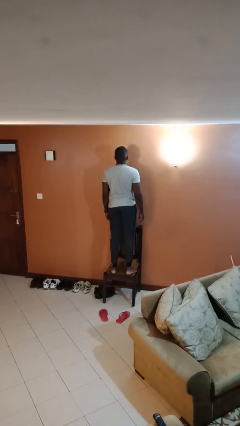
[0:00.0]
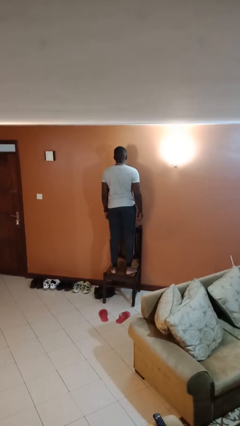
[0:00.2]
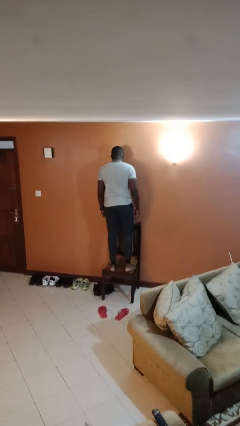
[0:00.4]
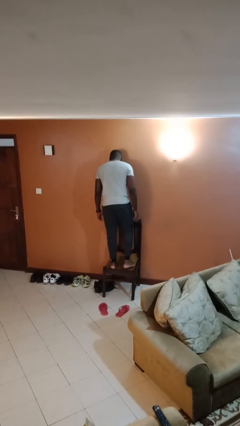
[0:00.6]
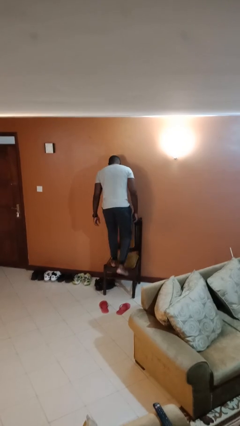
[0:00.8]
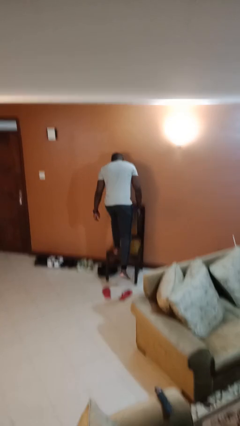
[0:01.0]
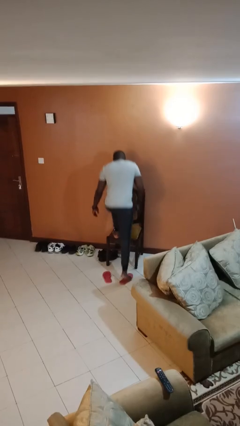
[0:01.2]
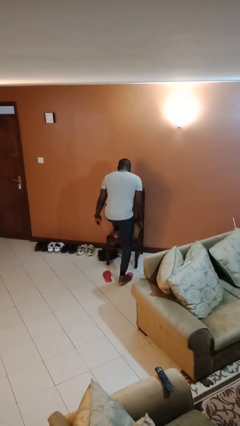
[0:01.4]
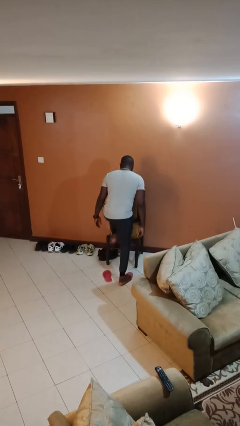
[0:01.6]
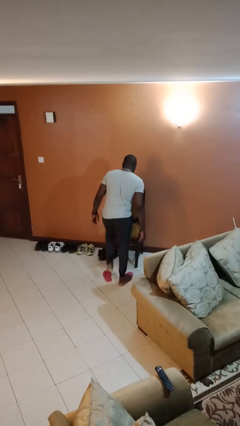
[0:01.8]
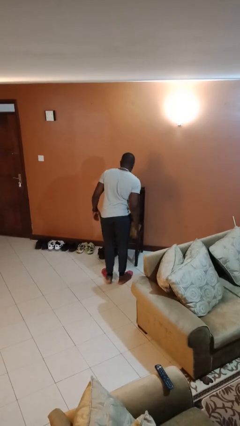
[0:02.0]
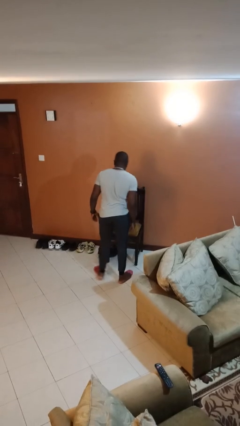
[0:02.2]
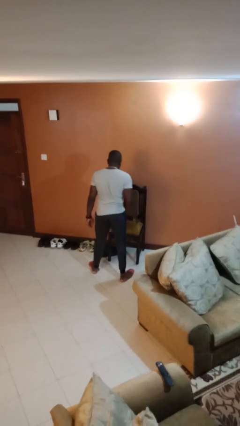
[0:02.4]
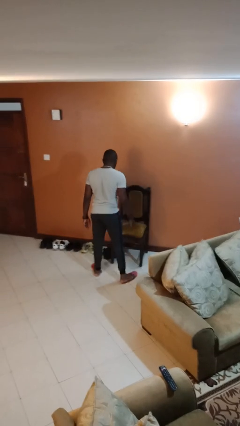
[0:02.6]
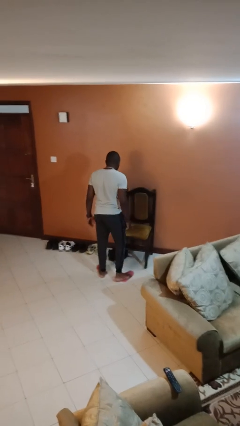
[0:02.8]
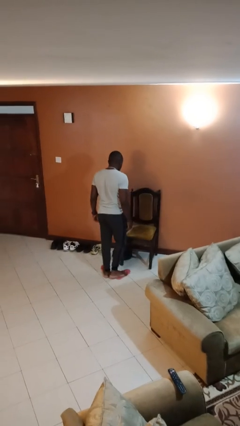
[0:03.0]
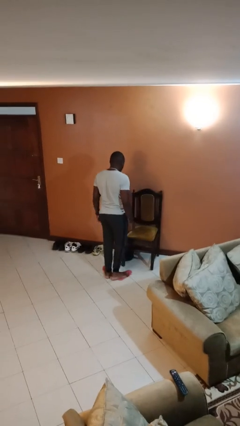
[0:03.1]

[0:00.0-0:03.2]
person climbs off chair

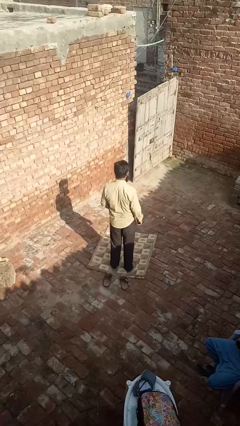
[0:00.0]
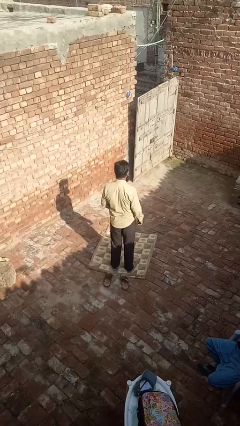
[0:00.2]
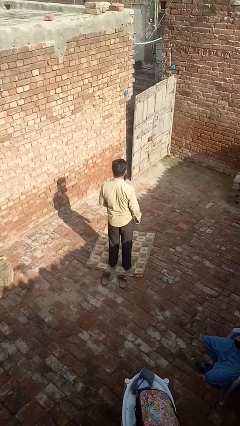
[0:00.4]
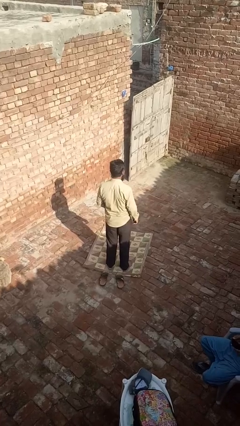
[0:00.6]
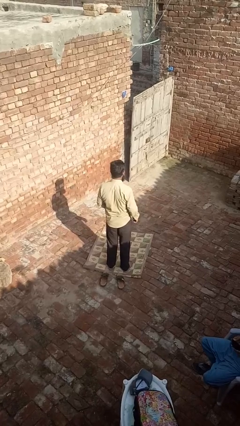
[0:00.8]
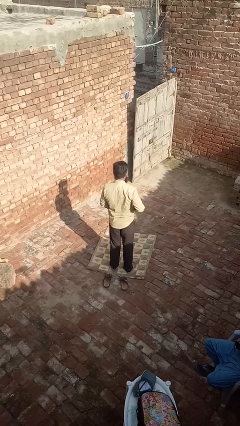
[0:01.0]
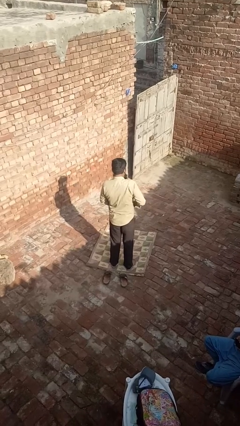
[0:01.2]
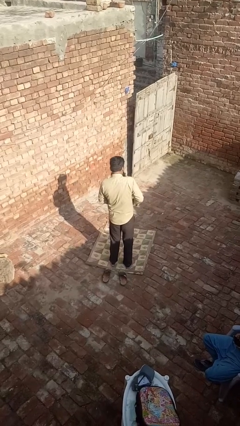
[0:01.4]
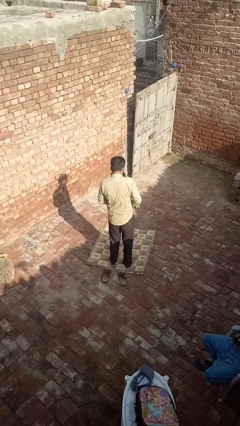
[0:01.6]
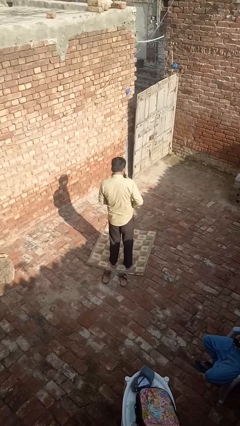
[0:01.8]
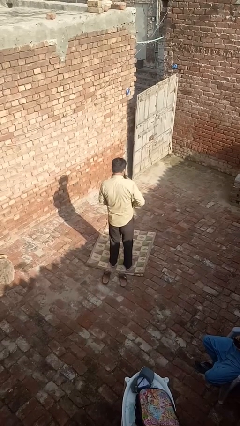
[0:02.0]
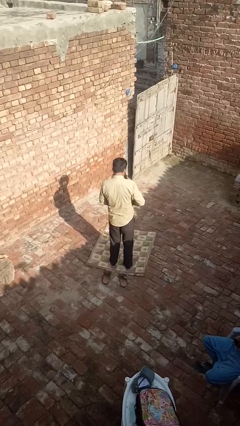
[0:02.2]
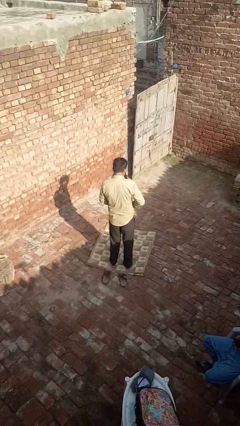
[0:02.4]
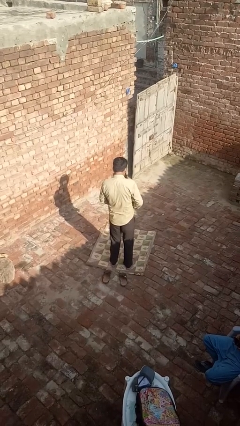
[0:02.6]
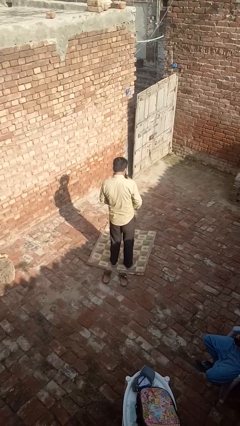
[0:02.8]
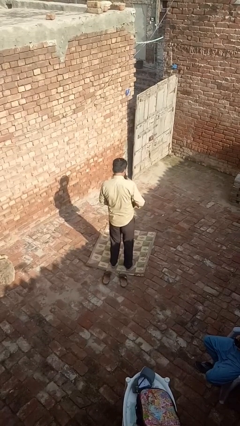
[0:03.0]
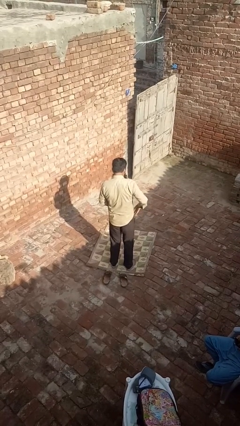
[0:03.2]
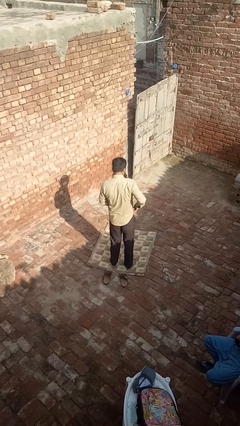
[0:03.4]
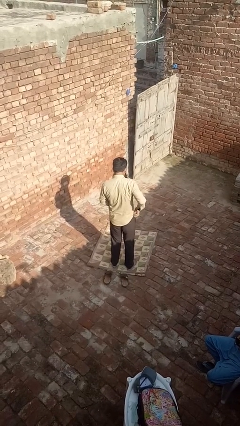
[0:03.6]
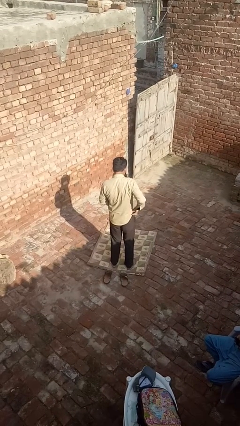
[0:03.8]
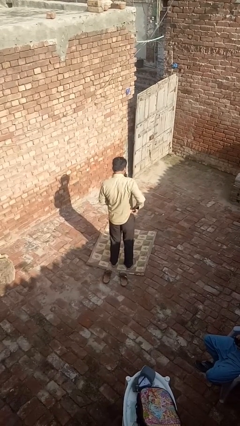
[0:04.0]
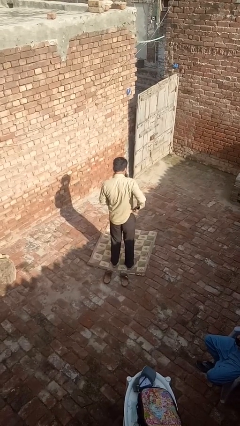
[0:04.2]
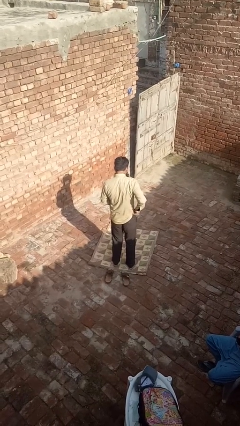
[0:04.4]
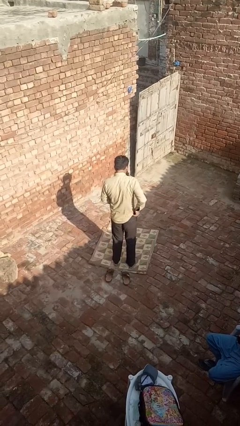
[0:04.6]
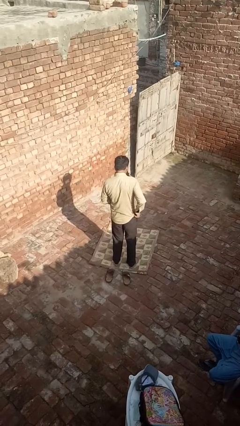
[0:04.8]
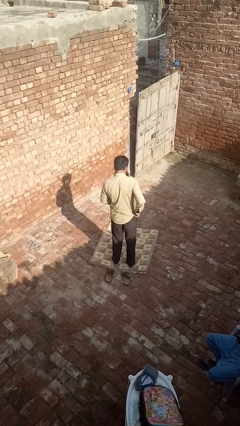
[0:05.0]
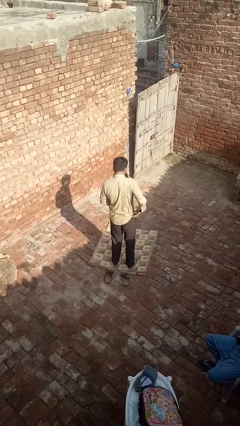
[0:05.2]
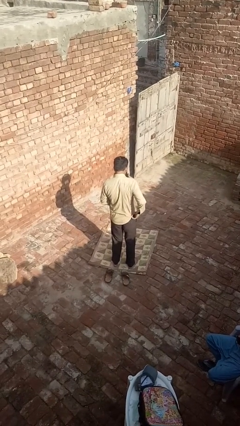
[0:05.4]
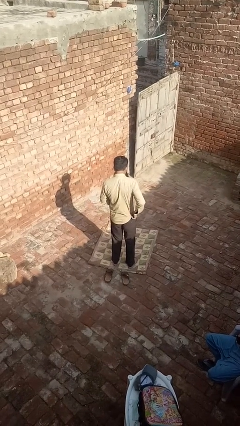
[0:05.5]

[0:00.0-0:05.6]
person tucks in shirt

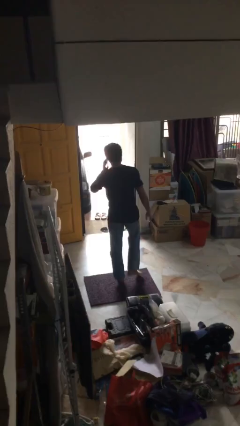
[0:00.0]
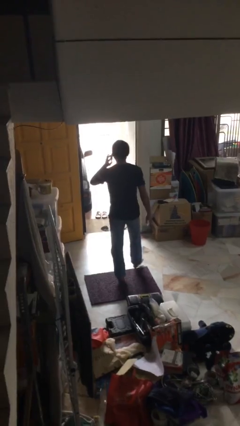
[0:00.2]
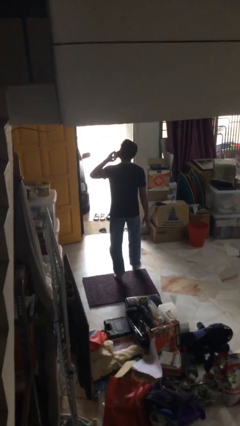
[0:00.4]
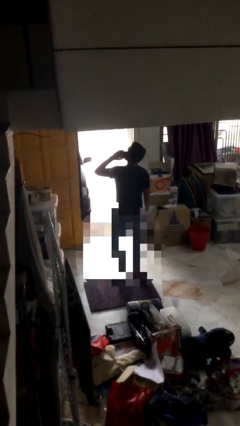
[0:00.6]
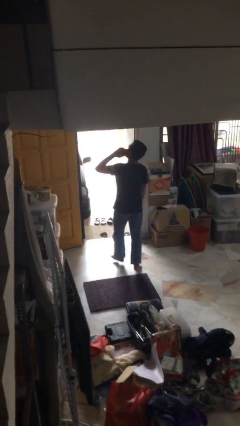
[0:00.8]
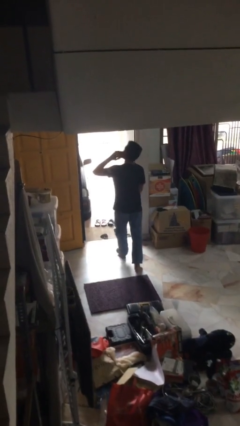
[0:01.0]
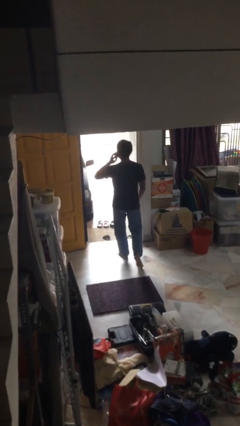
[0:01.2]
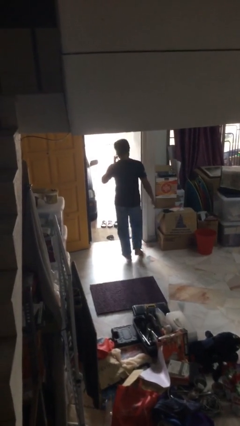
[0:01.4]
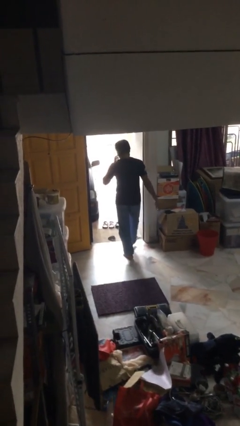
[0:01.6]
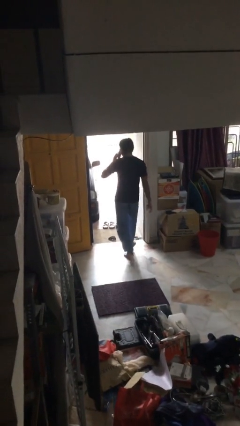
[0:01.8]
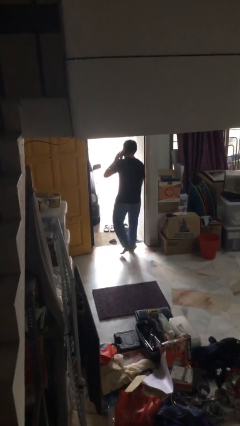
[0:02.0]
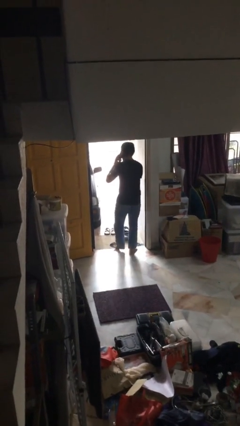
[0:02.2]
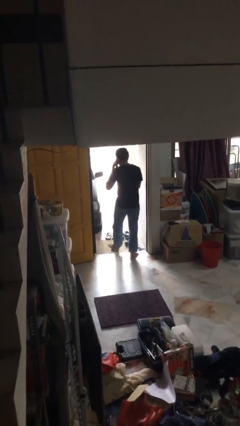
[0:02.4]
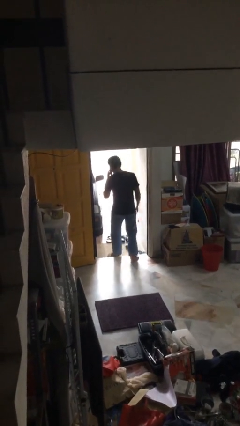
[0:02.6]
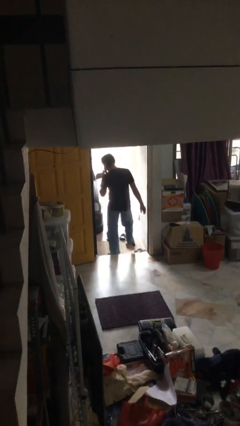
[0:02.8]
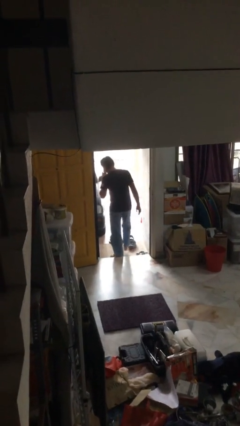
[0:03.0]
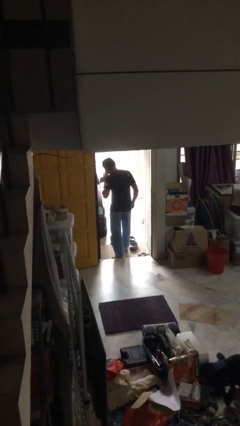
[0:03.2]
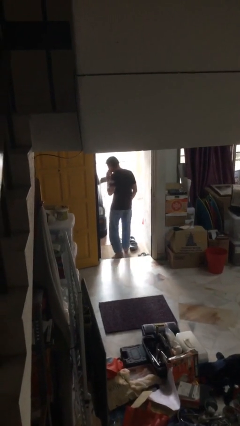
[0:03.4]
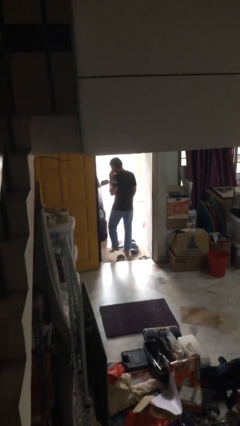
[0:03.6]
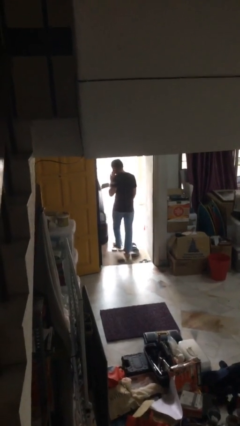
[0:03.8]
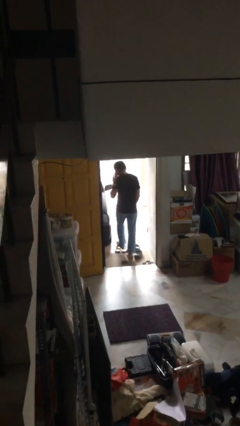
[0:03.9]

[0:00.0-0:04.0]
person exits scene through structure

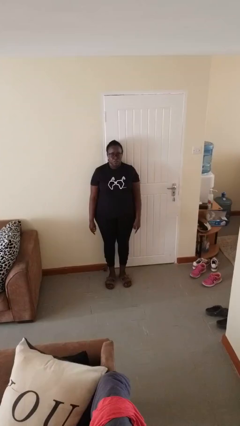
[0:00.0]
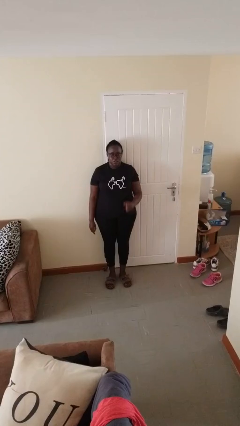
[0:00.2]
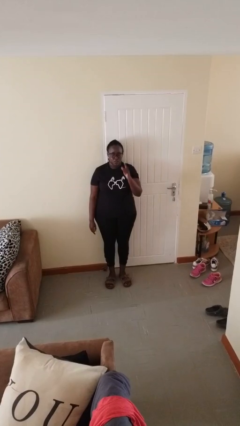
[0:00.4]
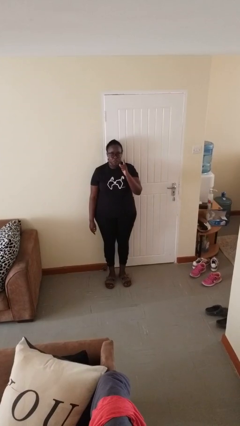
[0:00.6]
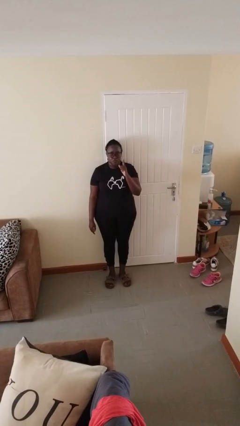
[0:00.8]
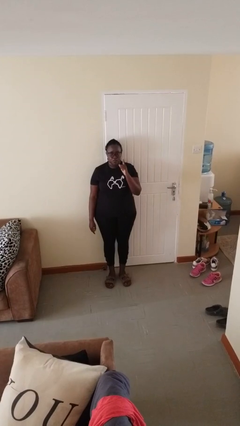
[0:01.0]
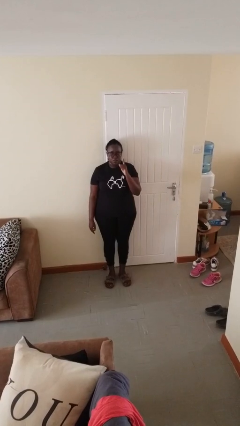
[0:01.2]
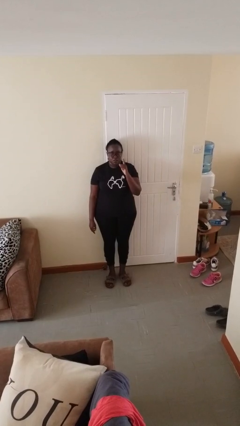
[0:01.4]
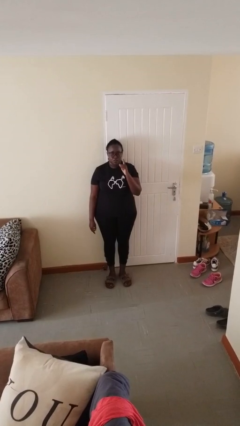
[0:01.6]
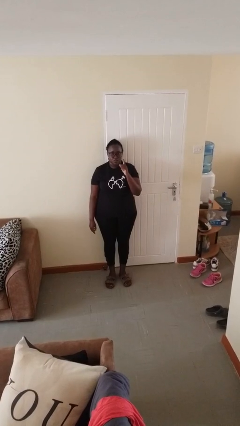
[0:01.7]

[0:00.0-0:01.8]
person gestures number one

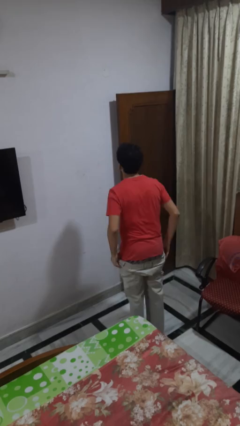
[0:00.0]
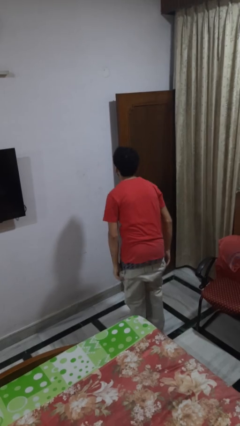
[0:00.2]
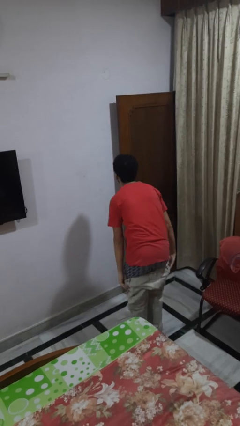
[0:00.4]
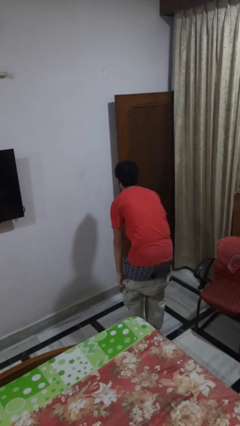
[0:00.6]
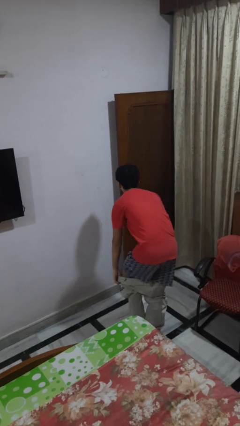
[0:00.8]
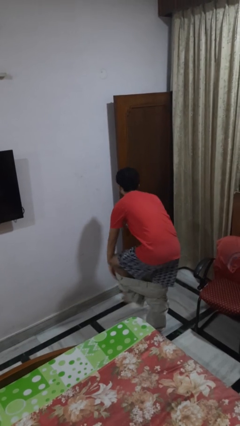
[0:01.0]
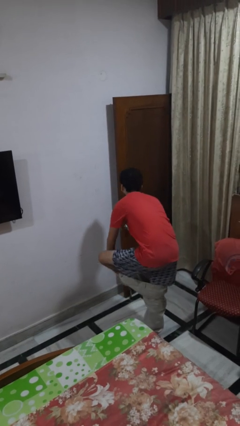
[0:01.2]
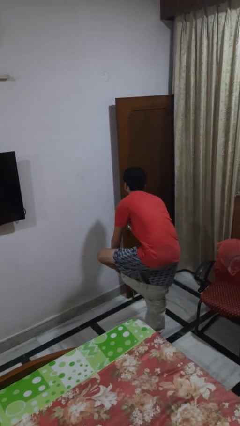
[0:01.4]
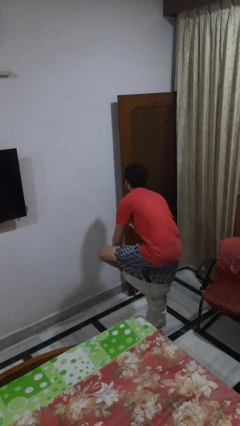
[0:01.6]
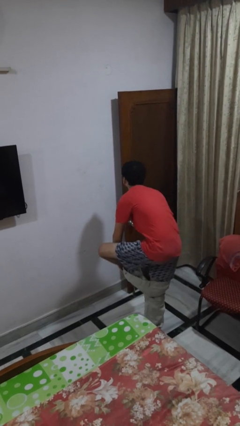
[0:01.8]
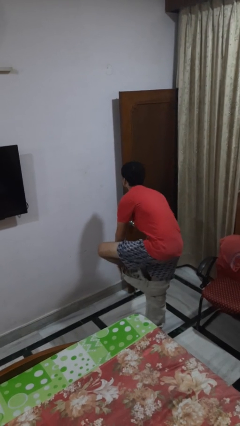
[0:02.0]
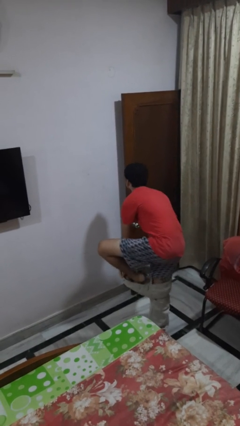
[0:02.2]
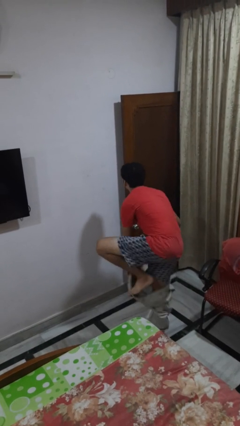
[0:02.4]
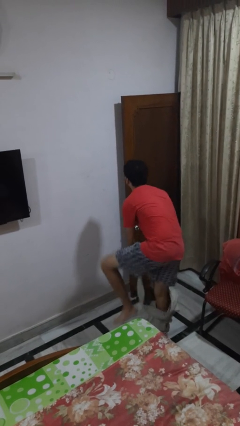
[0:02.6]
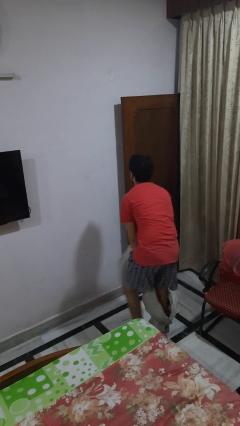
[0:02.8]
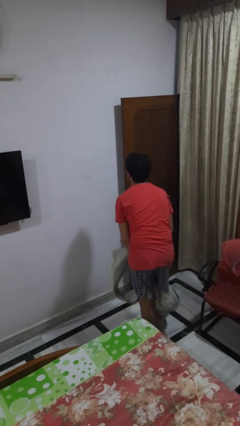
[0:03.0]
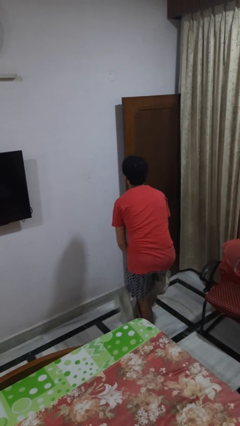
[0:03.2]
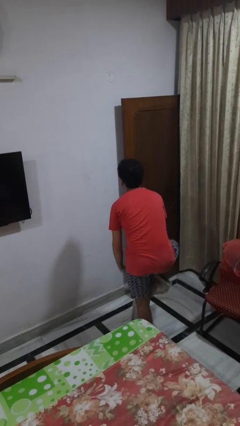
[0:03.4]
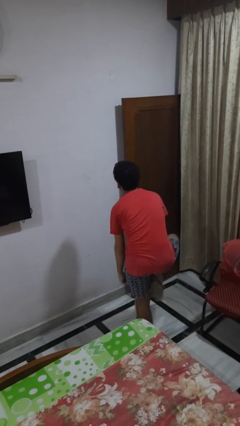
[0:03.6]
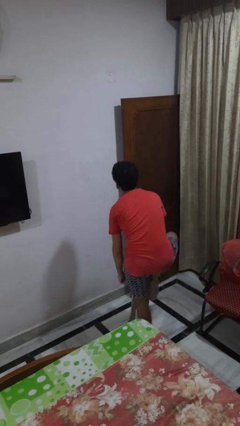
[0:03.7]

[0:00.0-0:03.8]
person takes off pants
